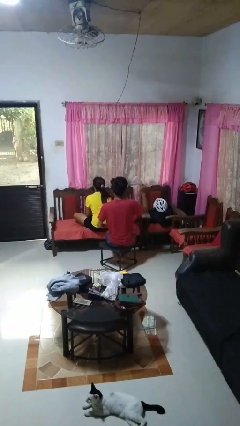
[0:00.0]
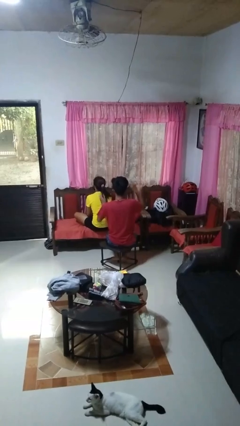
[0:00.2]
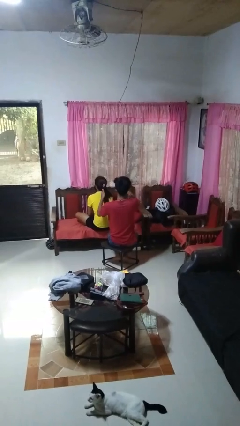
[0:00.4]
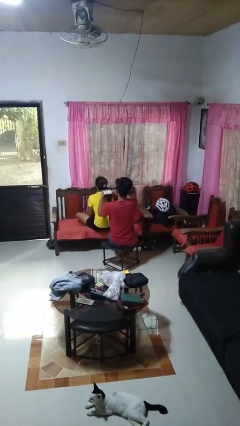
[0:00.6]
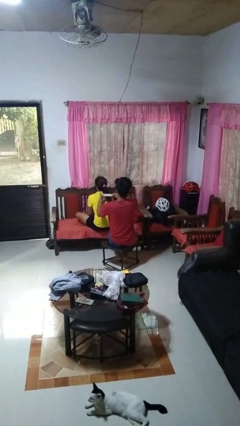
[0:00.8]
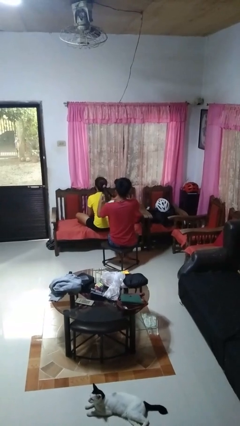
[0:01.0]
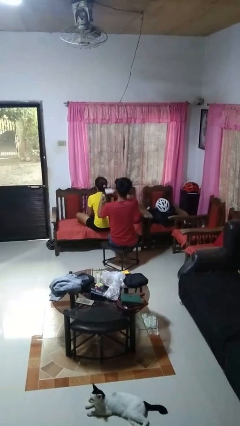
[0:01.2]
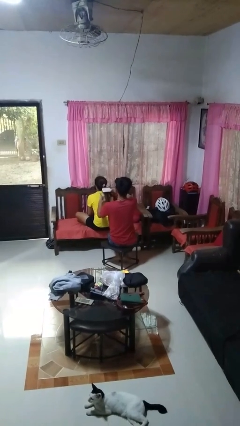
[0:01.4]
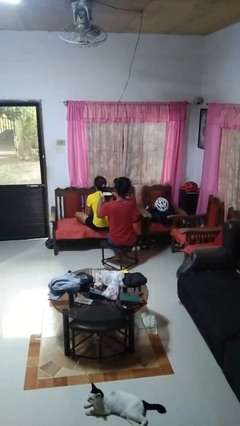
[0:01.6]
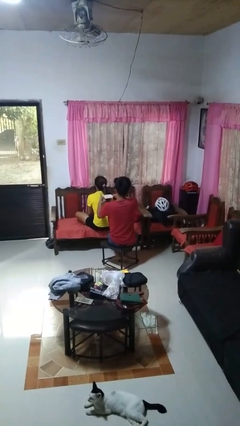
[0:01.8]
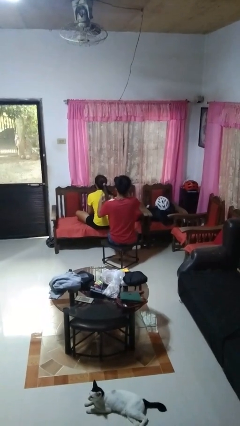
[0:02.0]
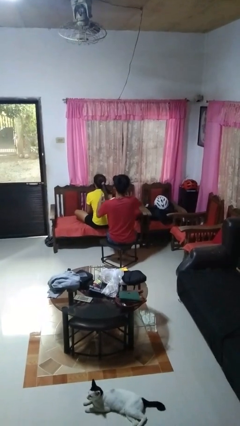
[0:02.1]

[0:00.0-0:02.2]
person brushes hair of person

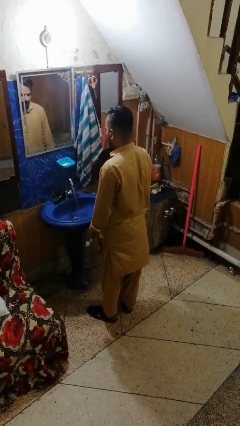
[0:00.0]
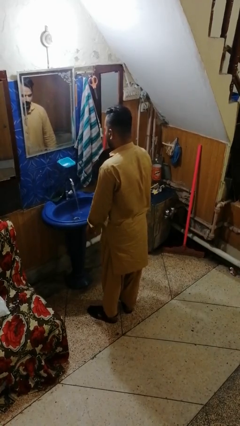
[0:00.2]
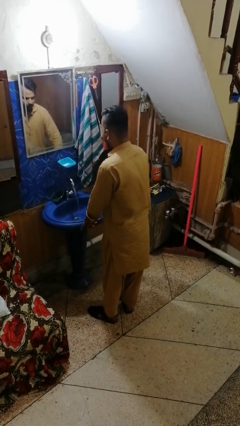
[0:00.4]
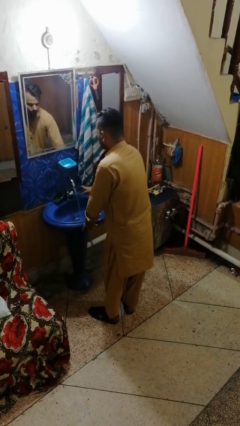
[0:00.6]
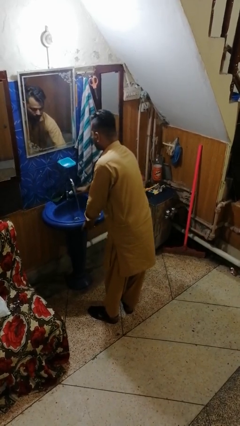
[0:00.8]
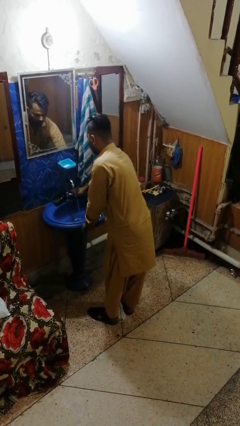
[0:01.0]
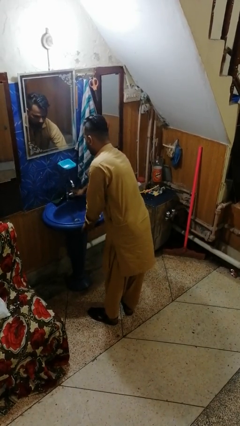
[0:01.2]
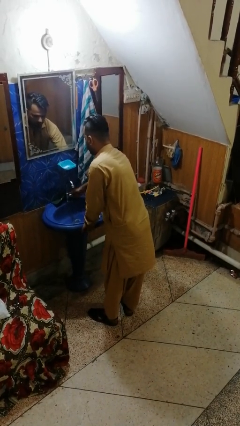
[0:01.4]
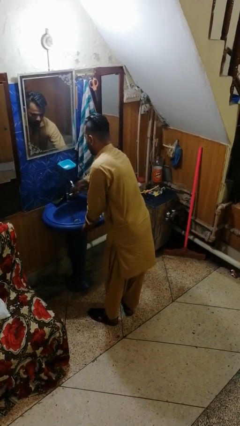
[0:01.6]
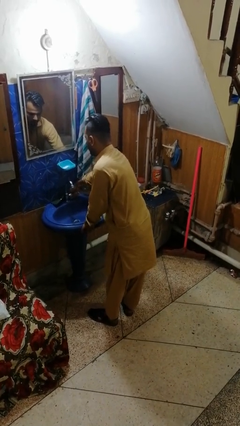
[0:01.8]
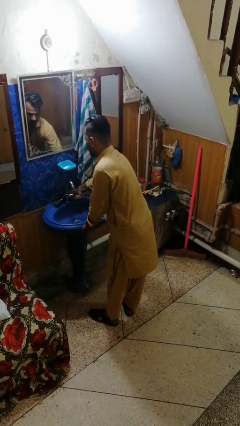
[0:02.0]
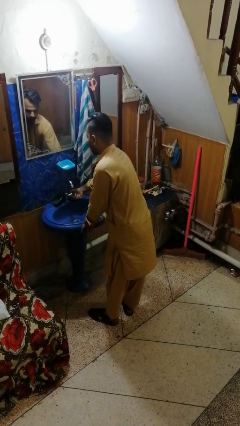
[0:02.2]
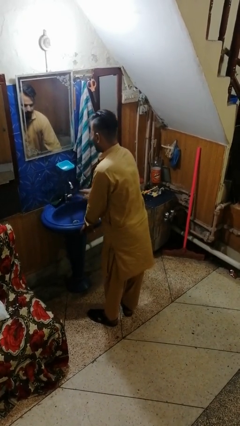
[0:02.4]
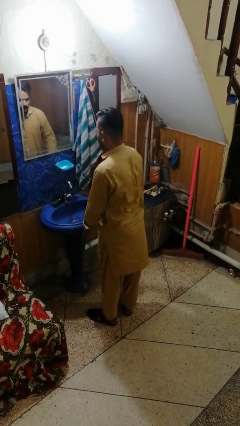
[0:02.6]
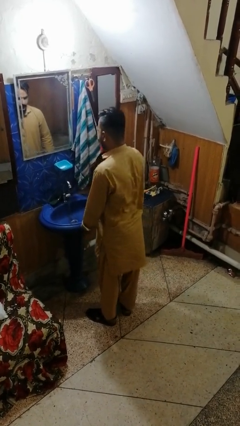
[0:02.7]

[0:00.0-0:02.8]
person turns off faucet

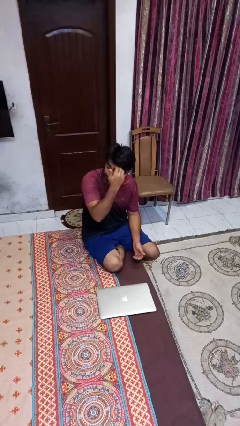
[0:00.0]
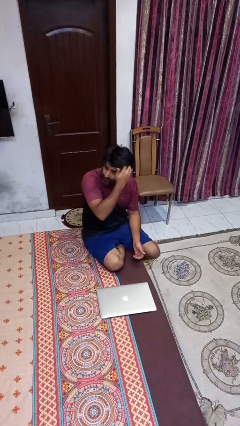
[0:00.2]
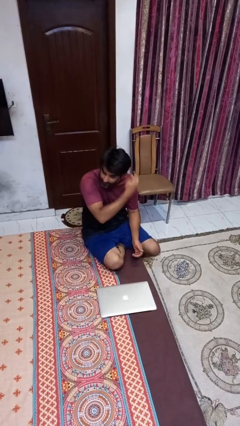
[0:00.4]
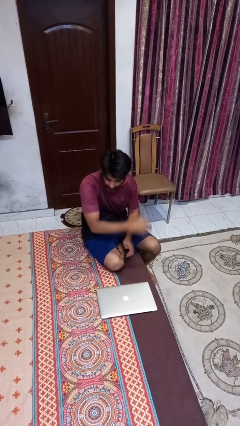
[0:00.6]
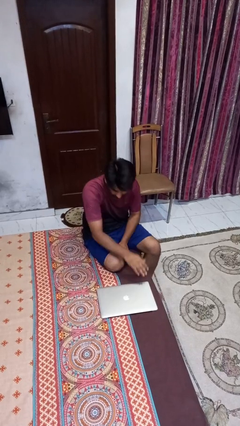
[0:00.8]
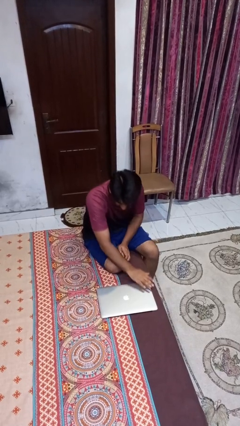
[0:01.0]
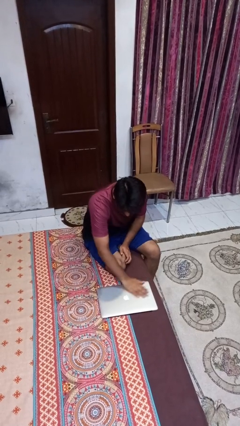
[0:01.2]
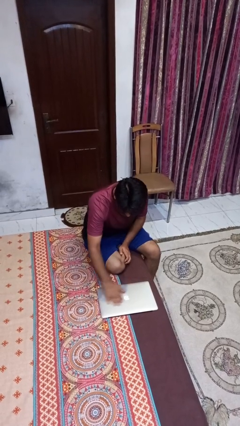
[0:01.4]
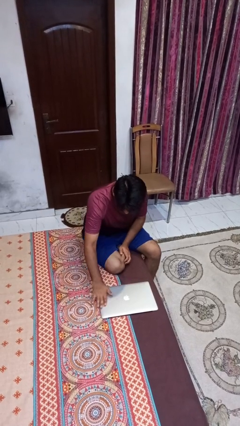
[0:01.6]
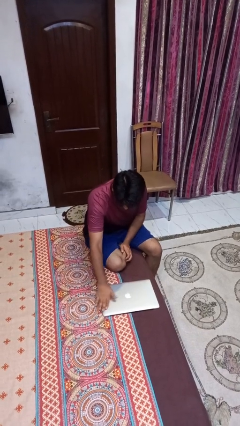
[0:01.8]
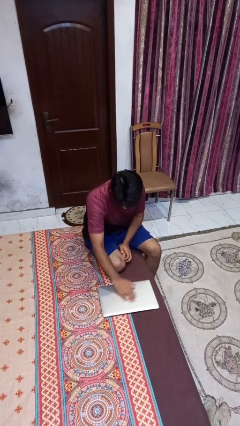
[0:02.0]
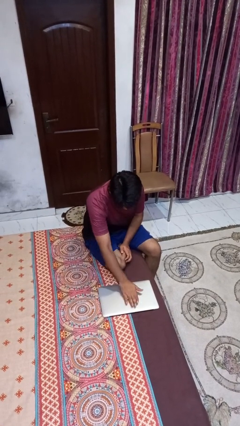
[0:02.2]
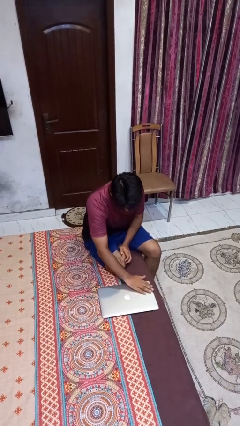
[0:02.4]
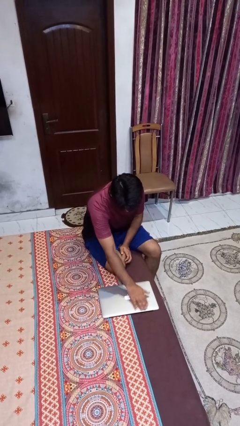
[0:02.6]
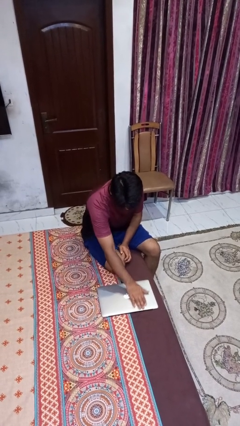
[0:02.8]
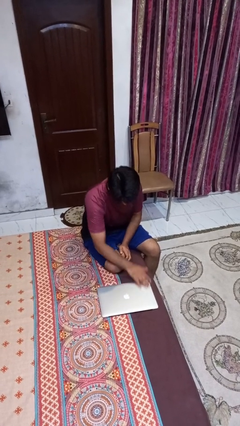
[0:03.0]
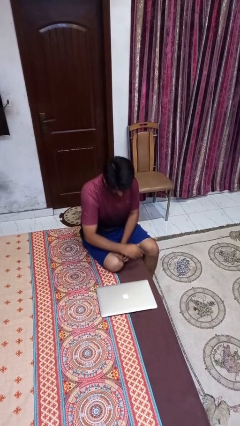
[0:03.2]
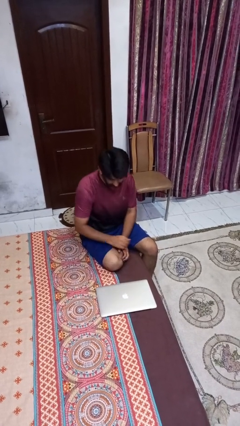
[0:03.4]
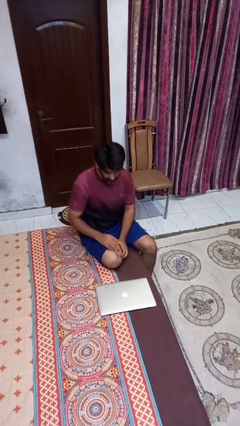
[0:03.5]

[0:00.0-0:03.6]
person waves hand over object

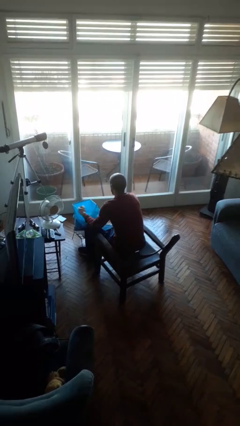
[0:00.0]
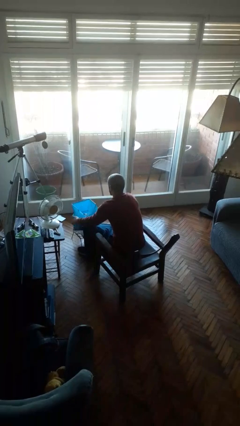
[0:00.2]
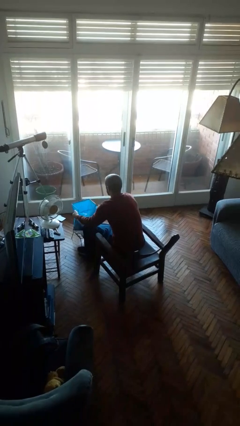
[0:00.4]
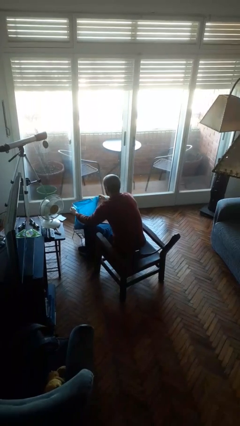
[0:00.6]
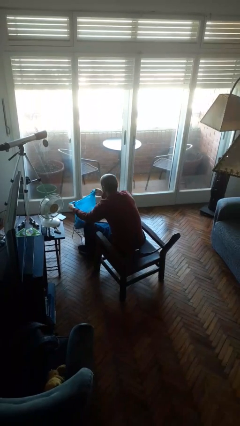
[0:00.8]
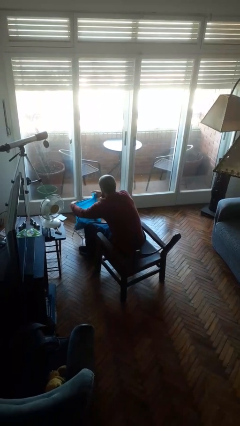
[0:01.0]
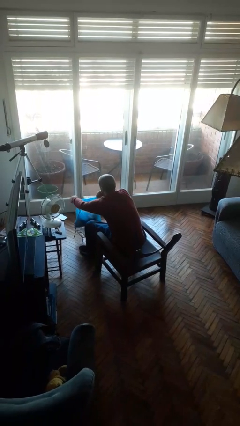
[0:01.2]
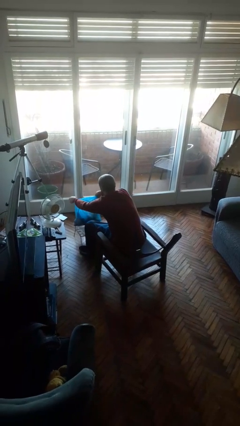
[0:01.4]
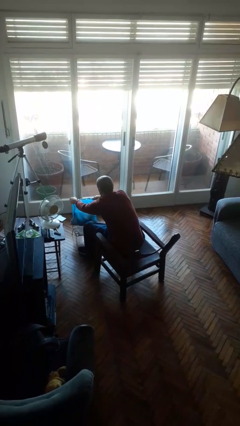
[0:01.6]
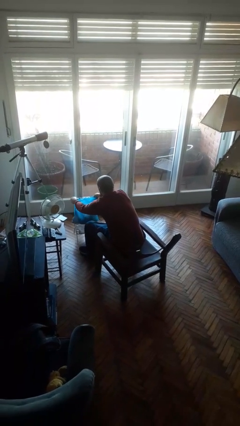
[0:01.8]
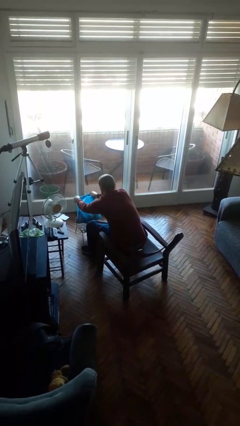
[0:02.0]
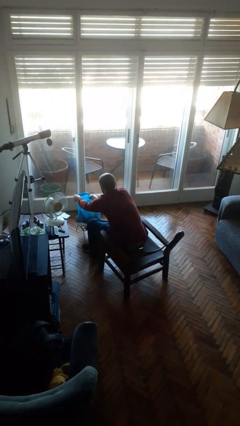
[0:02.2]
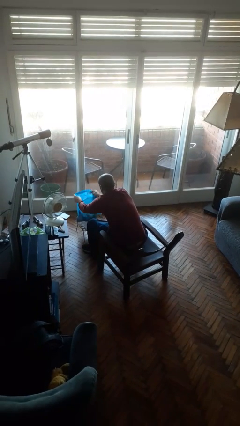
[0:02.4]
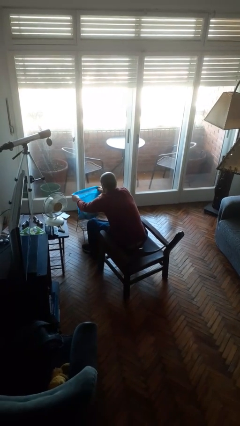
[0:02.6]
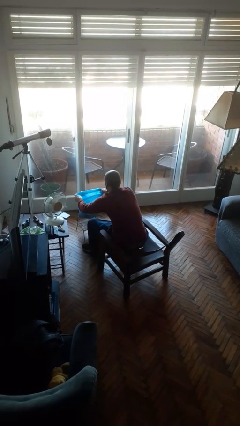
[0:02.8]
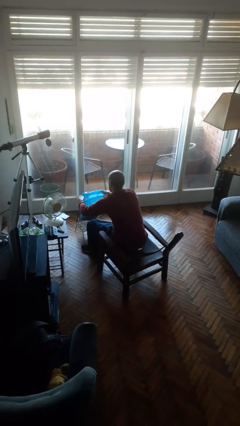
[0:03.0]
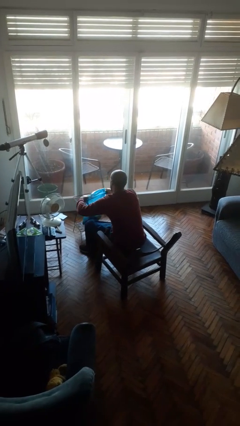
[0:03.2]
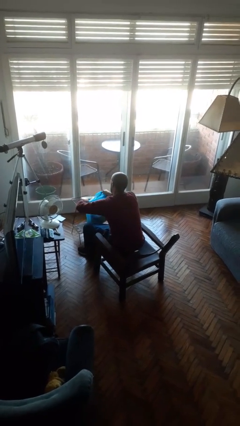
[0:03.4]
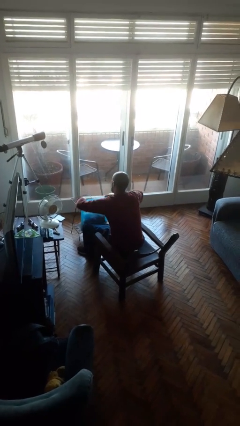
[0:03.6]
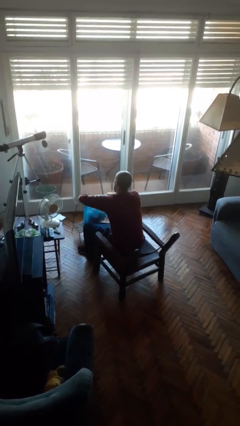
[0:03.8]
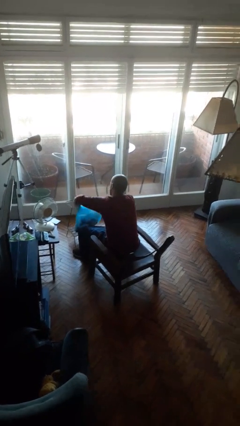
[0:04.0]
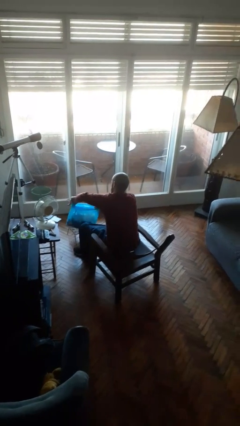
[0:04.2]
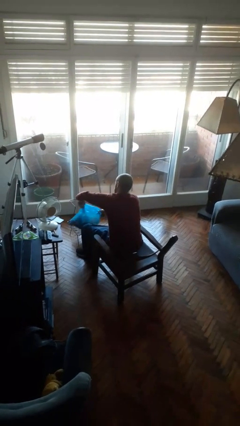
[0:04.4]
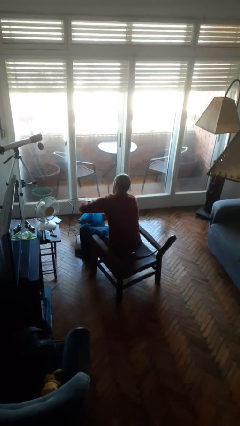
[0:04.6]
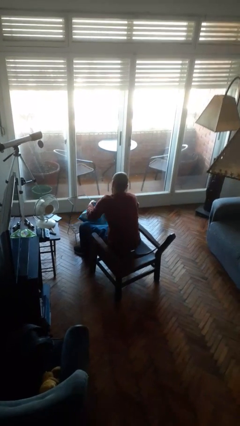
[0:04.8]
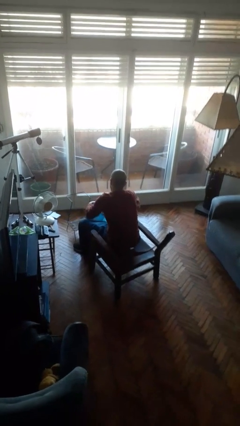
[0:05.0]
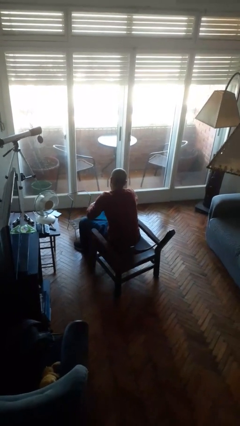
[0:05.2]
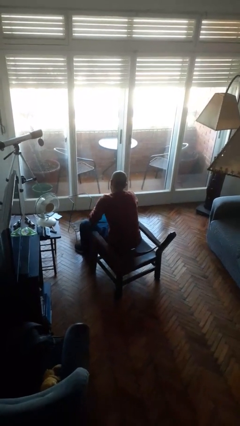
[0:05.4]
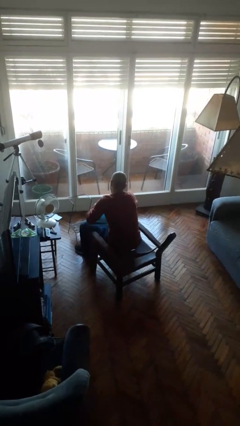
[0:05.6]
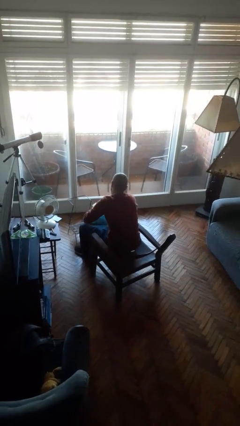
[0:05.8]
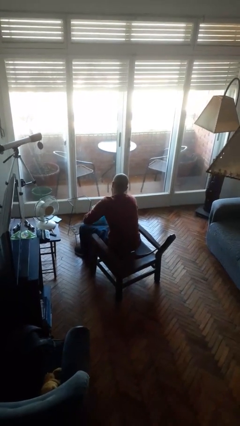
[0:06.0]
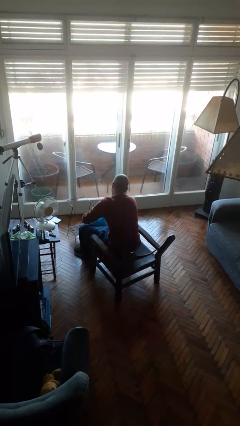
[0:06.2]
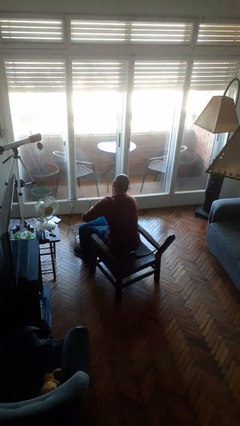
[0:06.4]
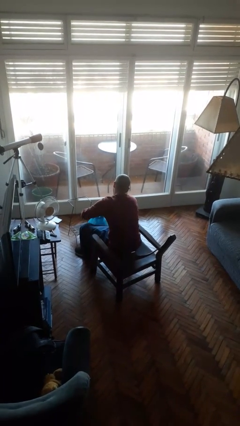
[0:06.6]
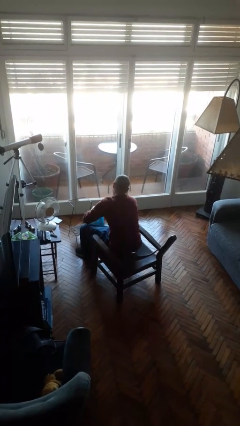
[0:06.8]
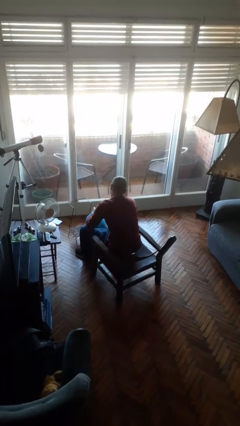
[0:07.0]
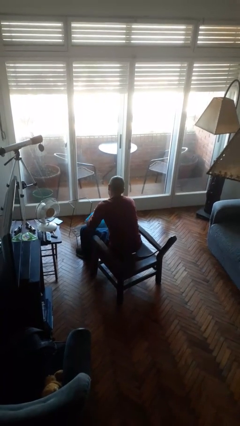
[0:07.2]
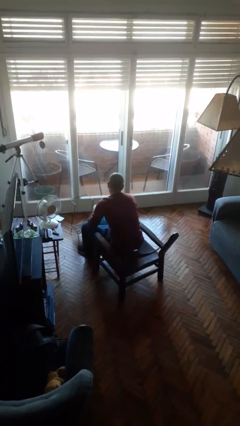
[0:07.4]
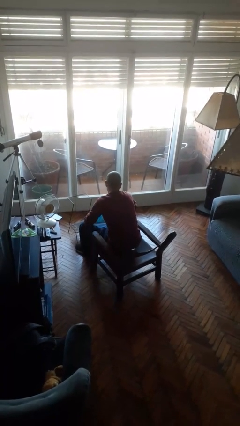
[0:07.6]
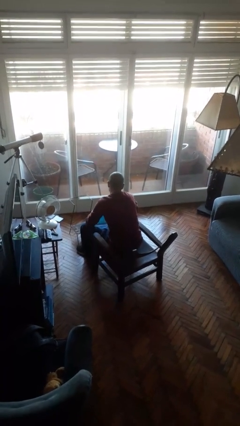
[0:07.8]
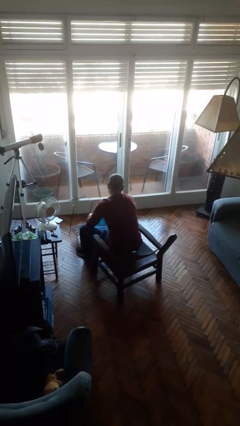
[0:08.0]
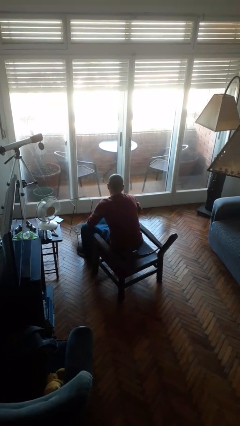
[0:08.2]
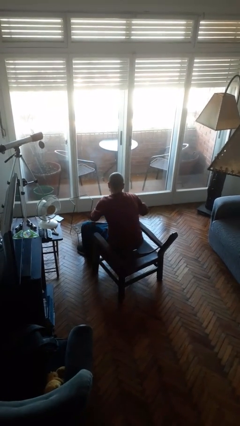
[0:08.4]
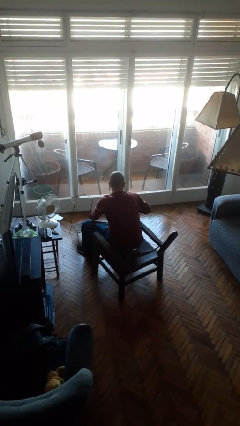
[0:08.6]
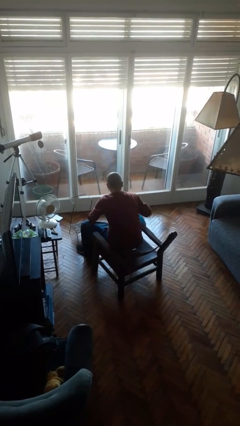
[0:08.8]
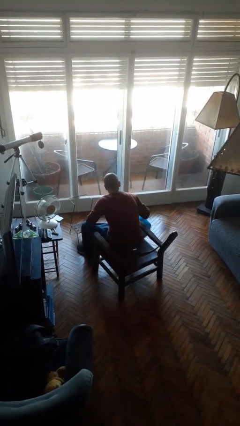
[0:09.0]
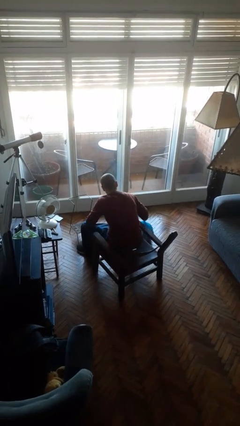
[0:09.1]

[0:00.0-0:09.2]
person removes trashbag from trashcan
